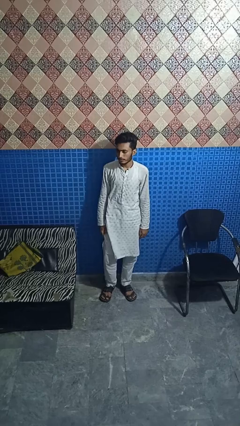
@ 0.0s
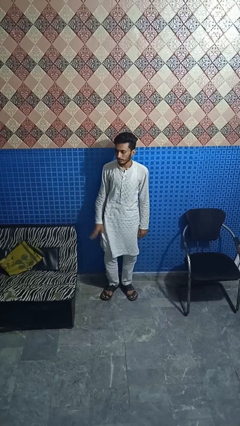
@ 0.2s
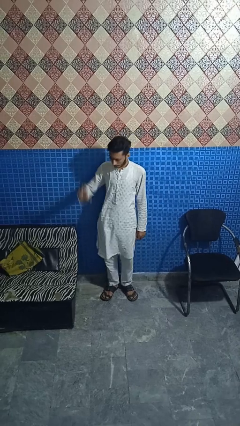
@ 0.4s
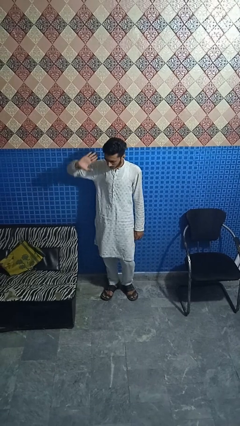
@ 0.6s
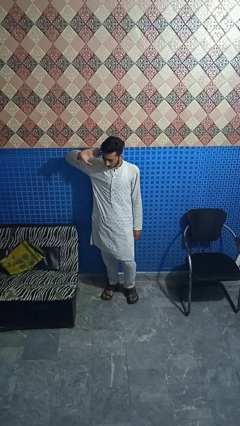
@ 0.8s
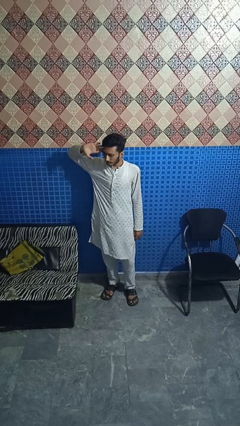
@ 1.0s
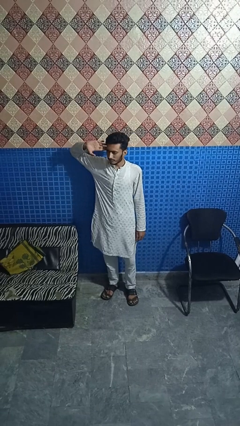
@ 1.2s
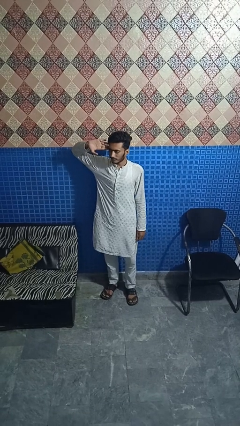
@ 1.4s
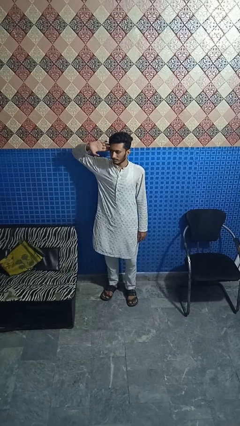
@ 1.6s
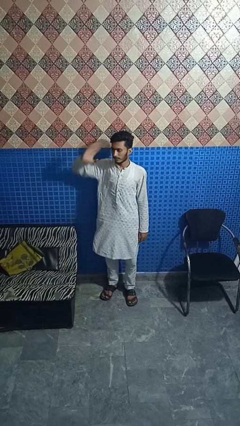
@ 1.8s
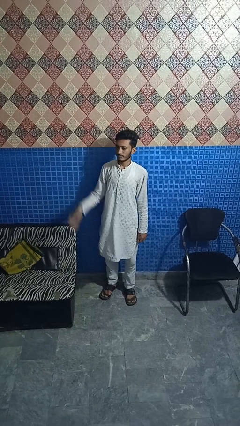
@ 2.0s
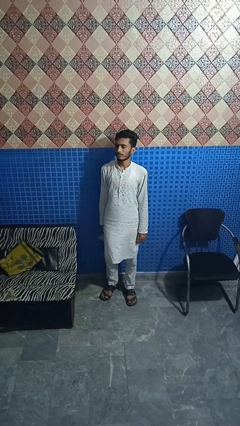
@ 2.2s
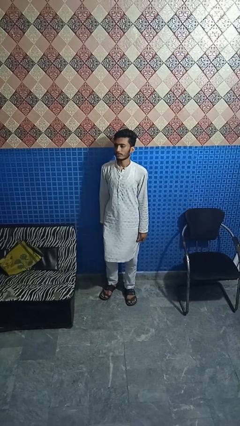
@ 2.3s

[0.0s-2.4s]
person salutes

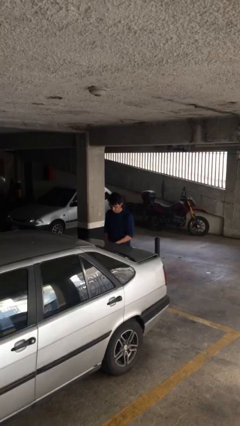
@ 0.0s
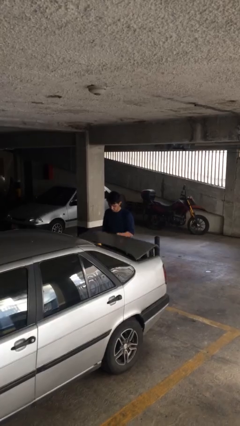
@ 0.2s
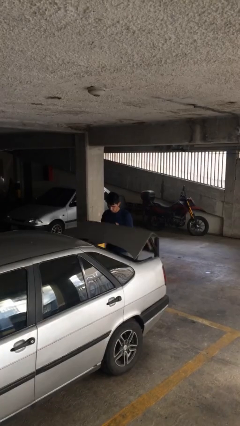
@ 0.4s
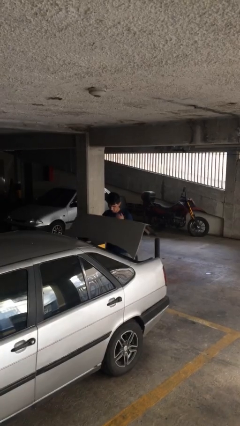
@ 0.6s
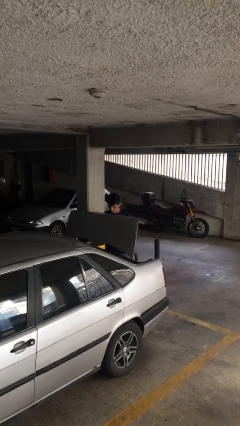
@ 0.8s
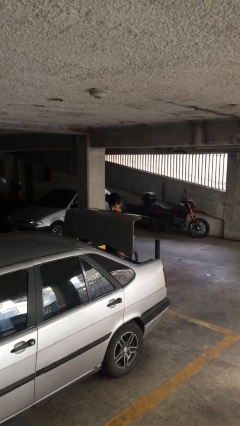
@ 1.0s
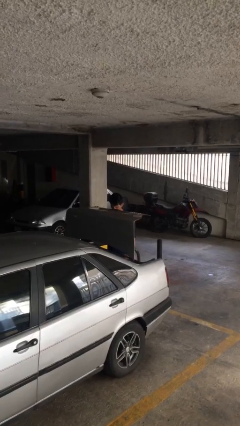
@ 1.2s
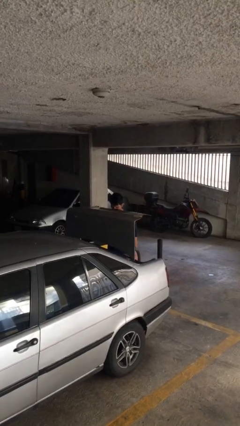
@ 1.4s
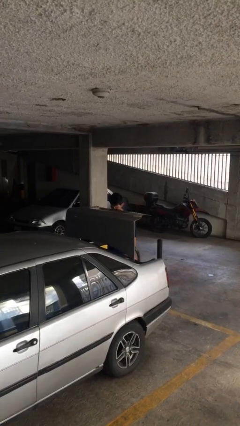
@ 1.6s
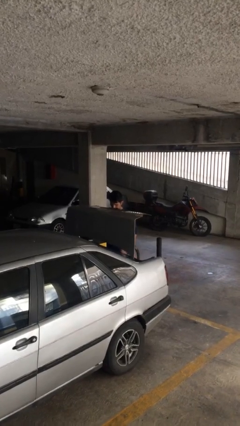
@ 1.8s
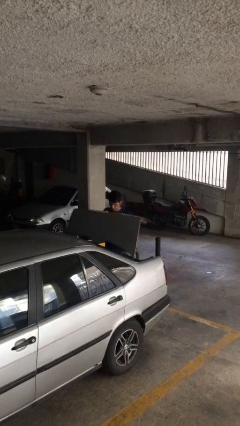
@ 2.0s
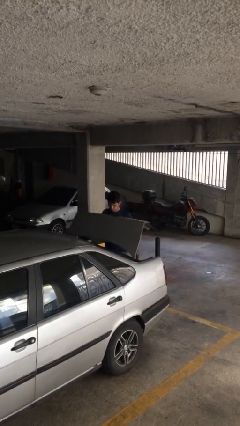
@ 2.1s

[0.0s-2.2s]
person opens car trunk

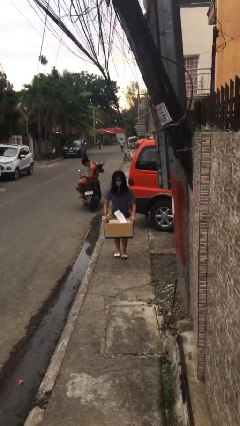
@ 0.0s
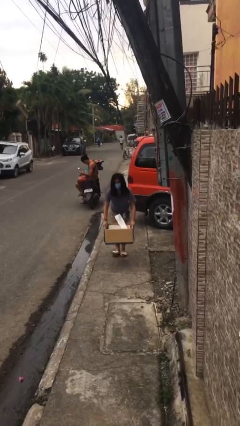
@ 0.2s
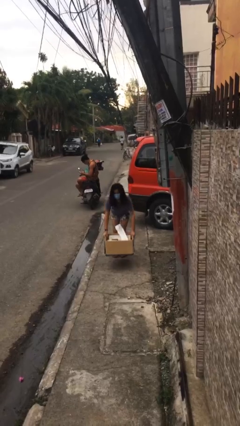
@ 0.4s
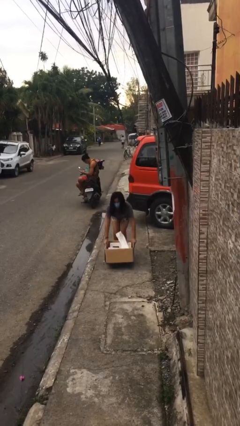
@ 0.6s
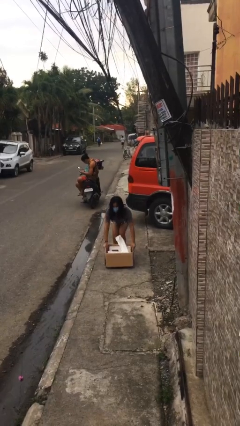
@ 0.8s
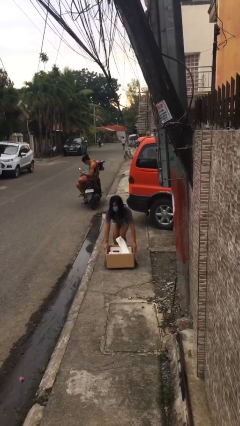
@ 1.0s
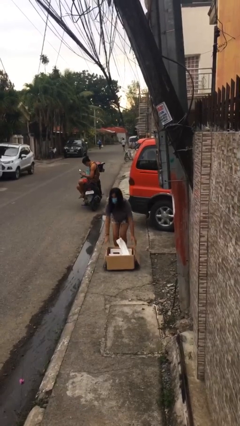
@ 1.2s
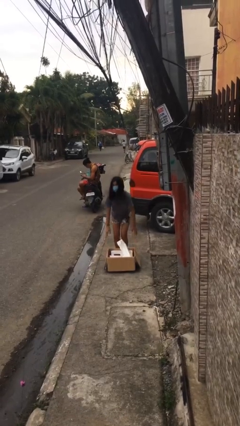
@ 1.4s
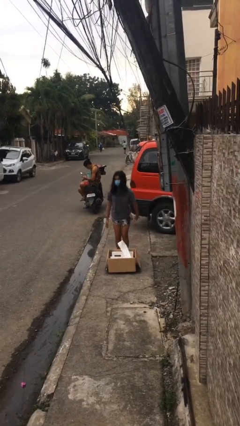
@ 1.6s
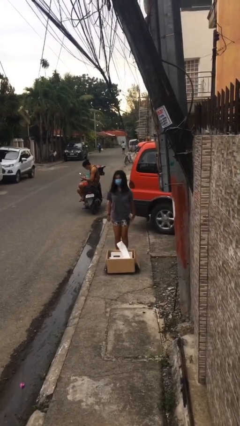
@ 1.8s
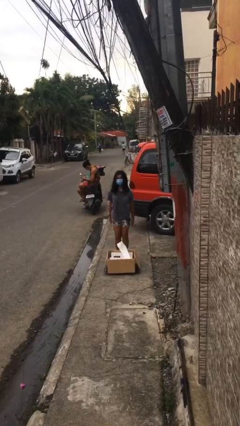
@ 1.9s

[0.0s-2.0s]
person puts down object on floor

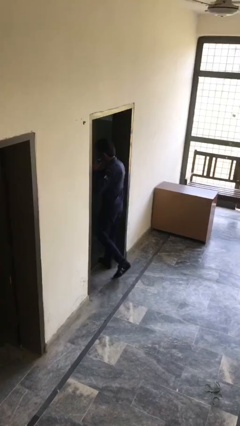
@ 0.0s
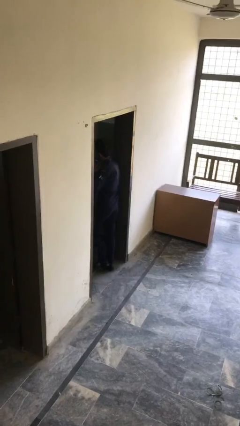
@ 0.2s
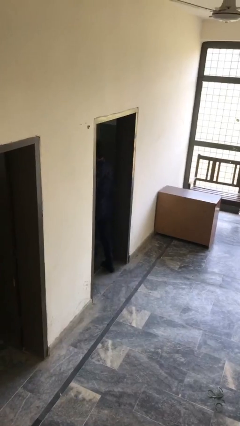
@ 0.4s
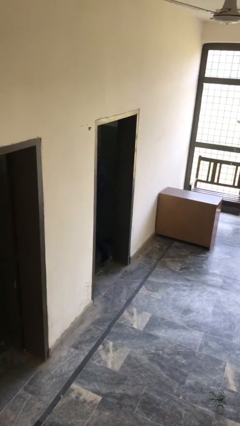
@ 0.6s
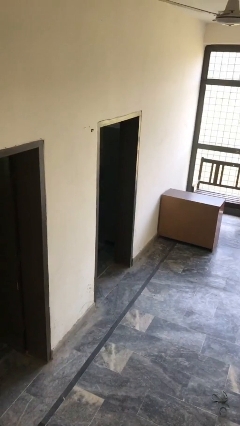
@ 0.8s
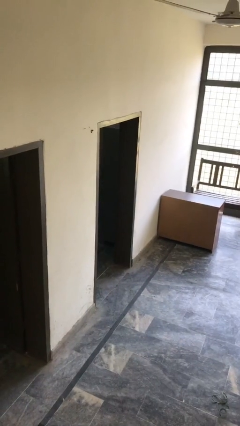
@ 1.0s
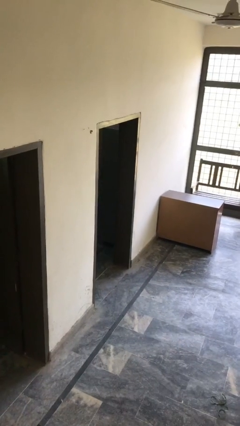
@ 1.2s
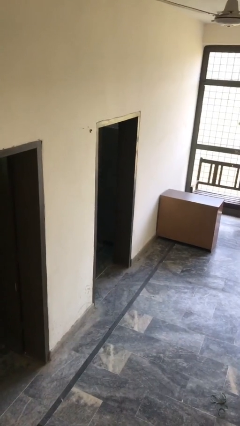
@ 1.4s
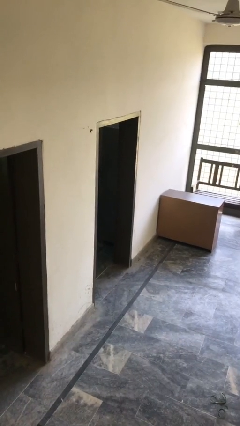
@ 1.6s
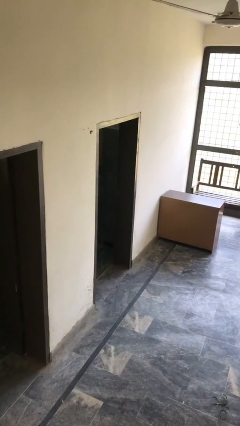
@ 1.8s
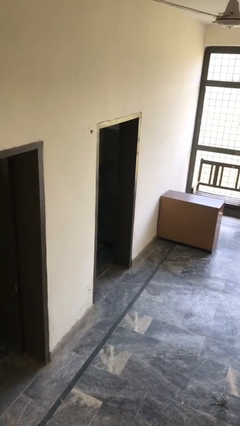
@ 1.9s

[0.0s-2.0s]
person exits scene through structure

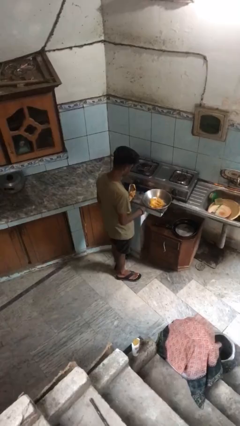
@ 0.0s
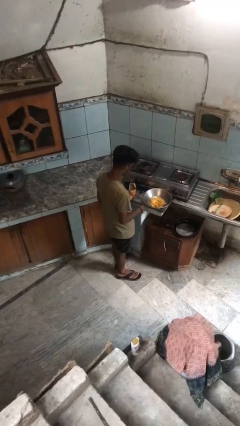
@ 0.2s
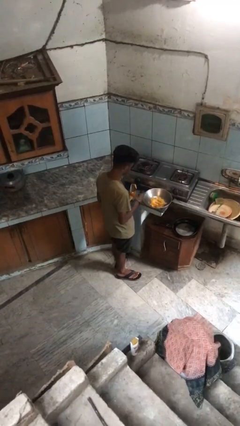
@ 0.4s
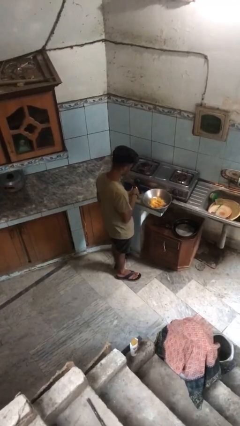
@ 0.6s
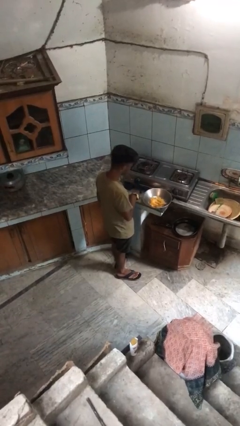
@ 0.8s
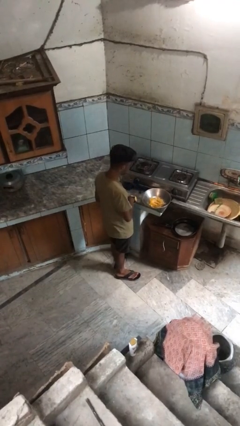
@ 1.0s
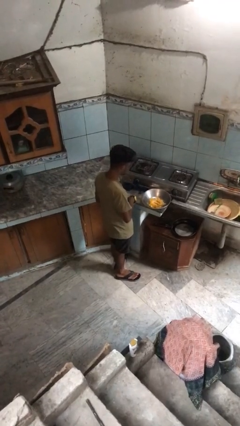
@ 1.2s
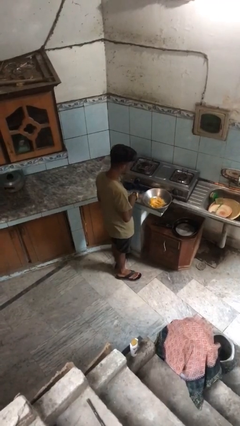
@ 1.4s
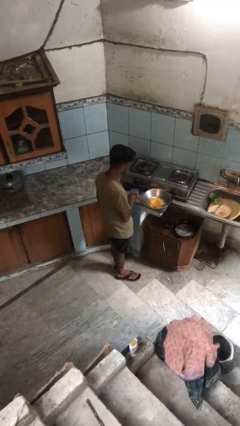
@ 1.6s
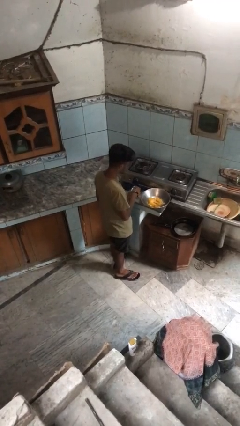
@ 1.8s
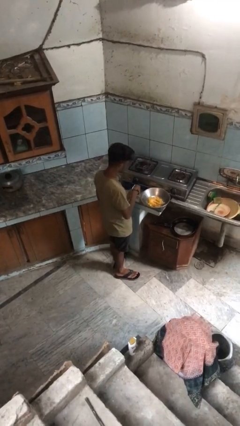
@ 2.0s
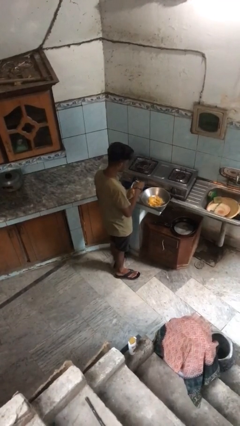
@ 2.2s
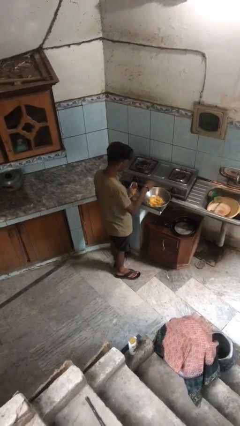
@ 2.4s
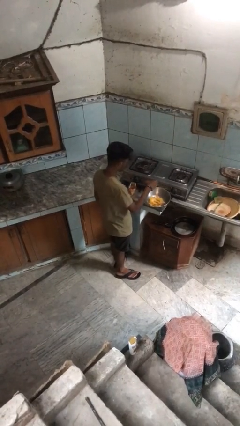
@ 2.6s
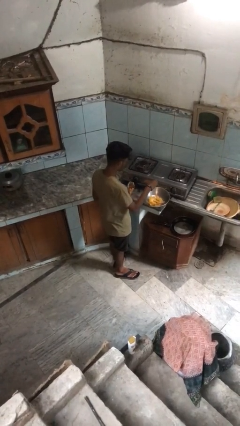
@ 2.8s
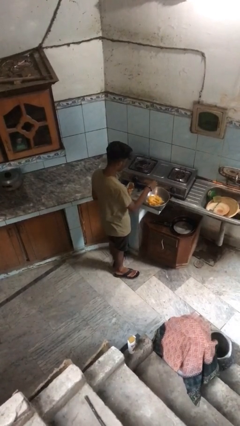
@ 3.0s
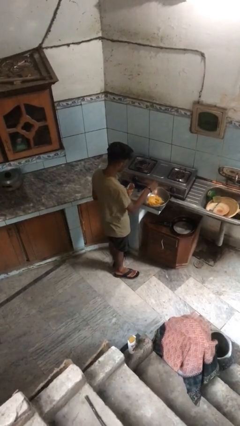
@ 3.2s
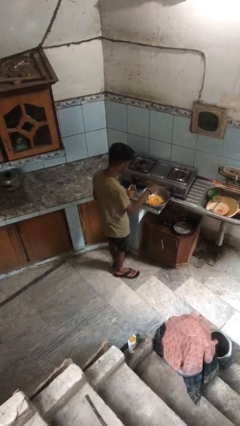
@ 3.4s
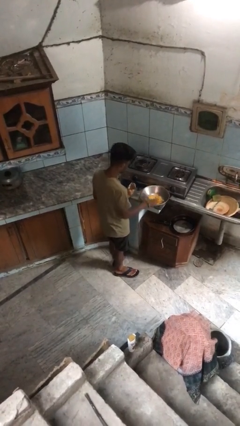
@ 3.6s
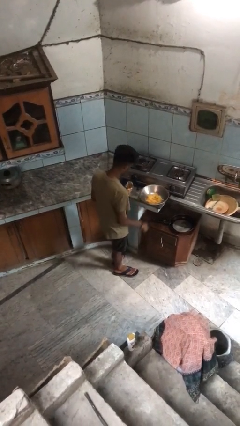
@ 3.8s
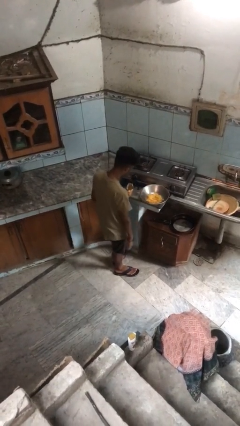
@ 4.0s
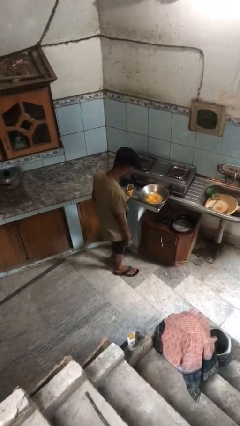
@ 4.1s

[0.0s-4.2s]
person pours into bowl

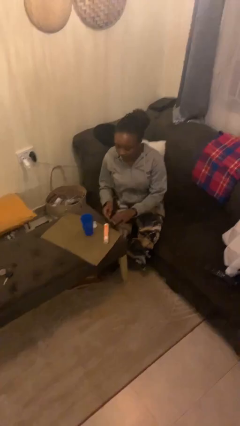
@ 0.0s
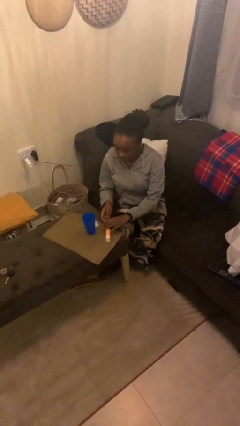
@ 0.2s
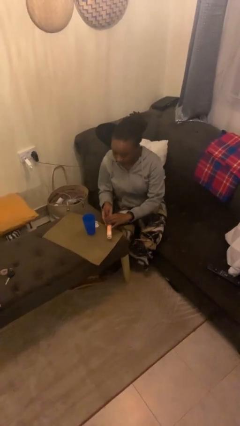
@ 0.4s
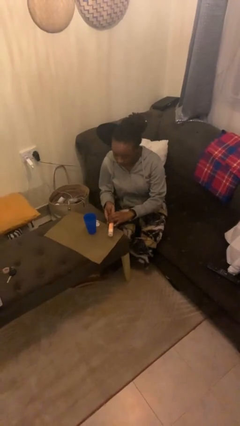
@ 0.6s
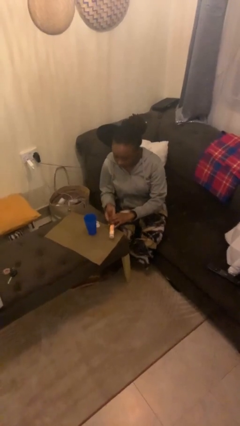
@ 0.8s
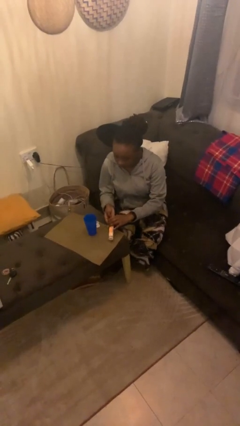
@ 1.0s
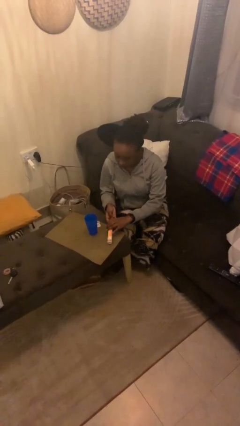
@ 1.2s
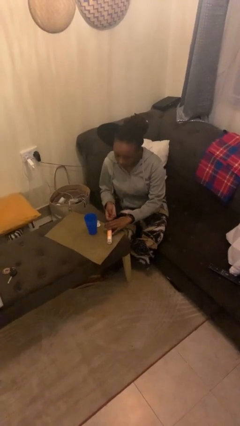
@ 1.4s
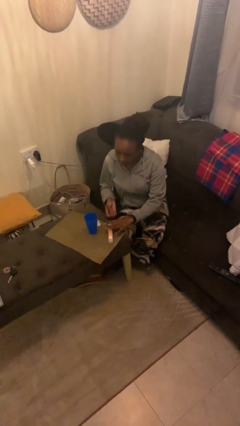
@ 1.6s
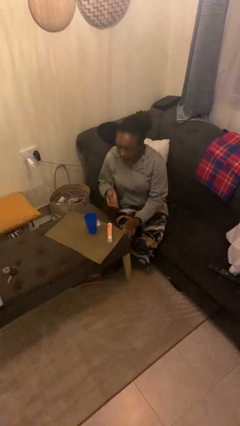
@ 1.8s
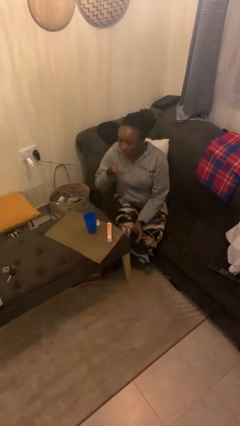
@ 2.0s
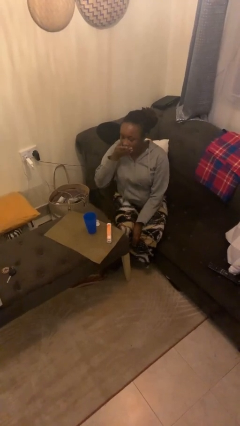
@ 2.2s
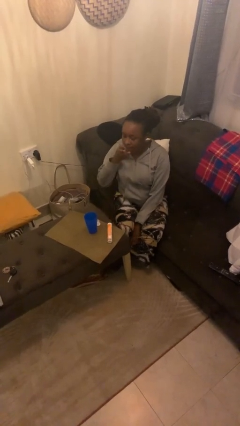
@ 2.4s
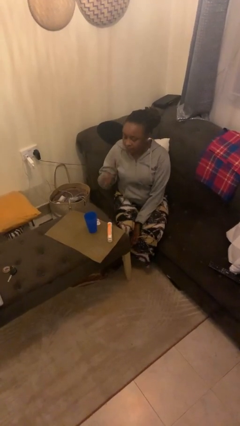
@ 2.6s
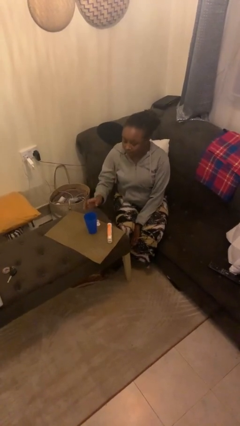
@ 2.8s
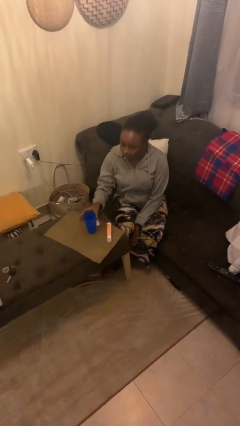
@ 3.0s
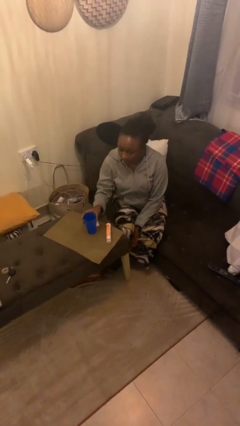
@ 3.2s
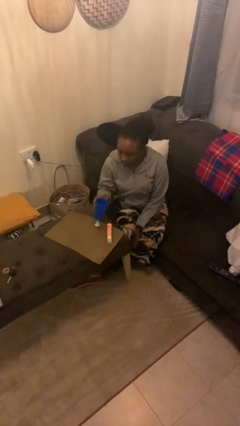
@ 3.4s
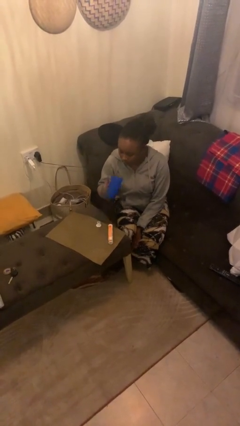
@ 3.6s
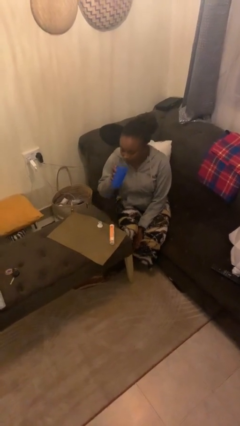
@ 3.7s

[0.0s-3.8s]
person takes medicine pills

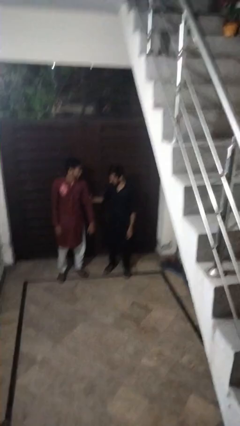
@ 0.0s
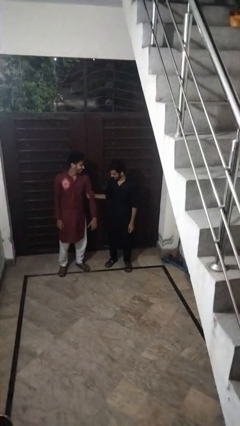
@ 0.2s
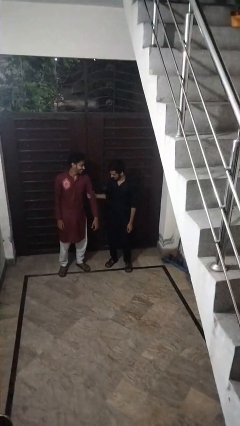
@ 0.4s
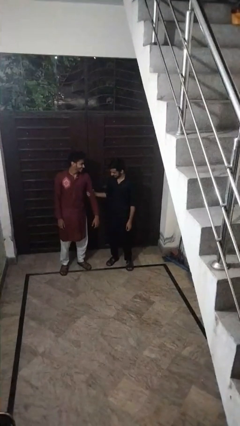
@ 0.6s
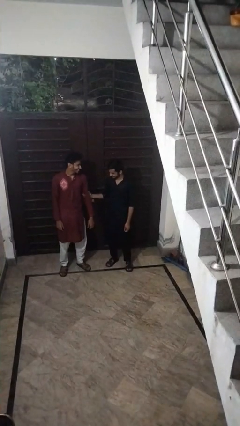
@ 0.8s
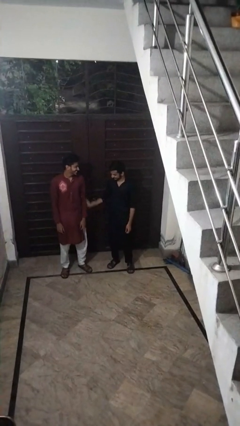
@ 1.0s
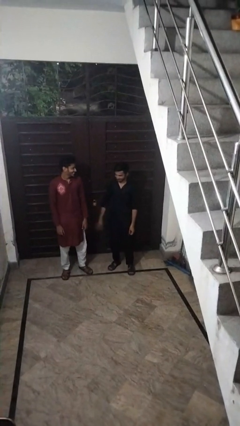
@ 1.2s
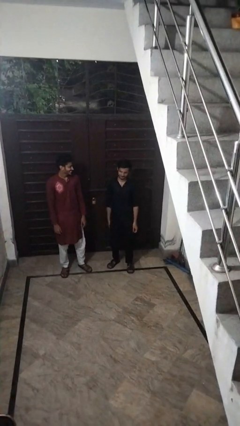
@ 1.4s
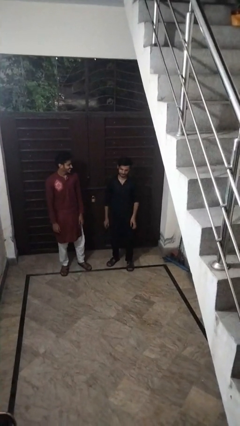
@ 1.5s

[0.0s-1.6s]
person grabs person by bicep
